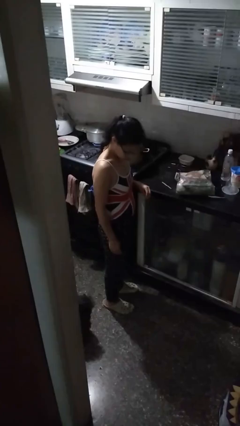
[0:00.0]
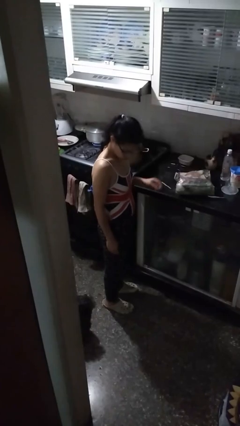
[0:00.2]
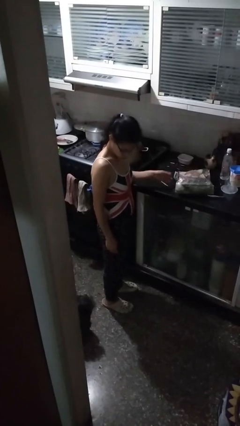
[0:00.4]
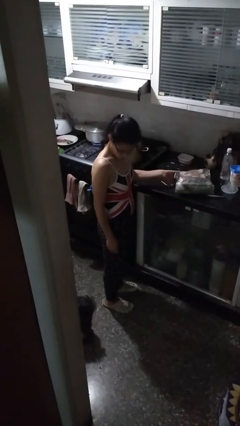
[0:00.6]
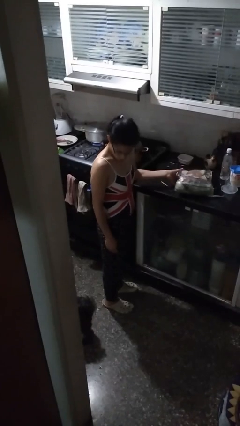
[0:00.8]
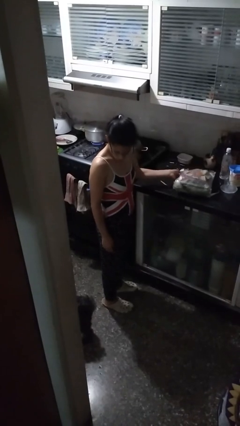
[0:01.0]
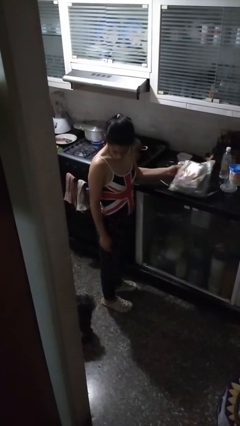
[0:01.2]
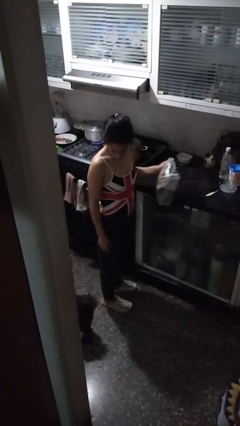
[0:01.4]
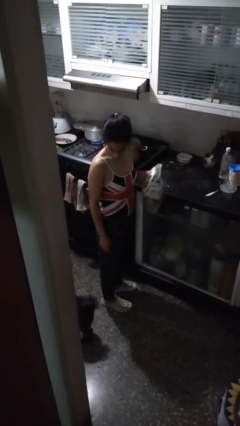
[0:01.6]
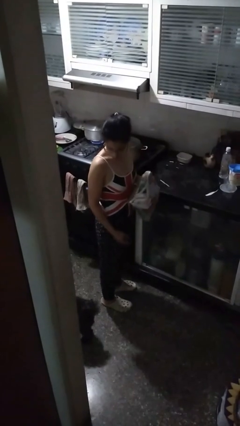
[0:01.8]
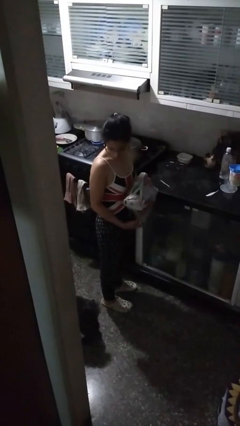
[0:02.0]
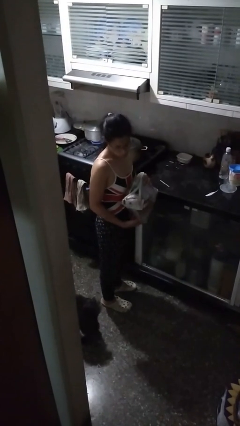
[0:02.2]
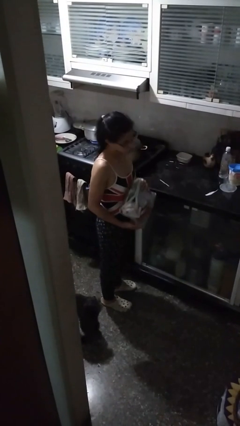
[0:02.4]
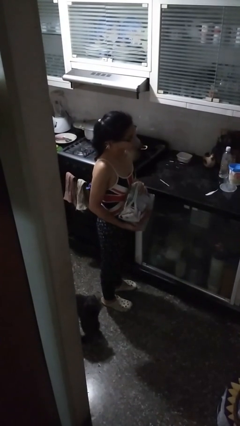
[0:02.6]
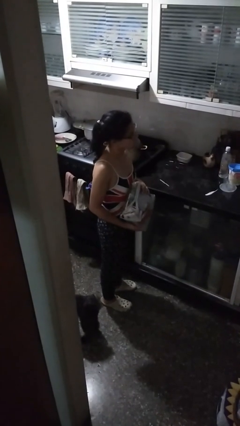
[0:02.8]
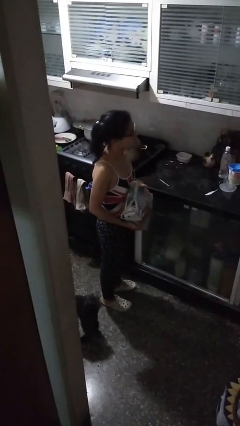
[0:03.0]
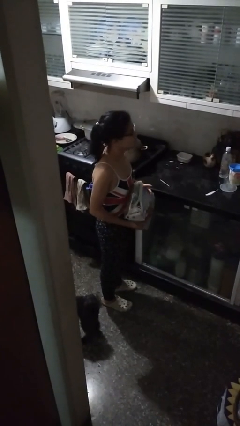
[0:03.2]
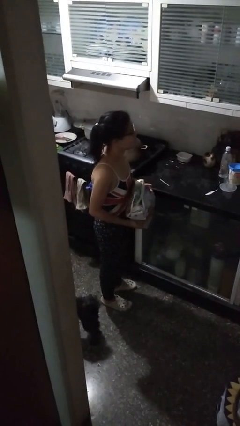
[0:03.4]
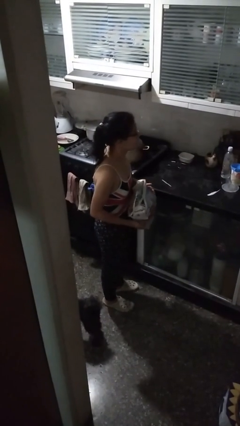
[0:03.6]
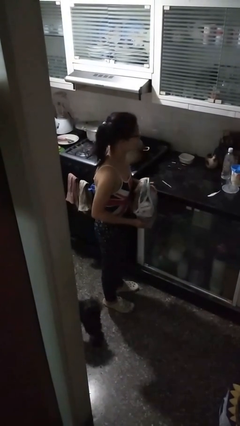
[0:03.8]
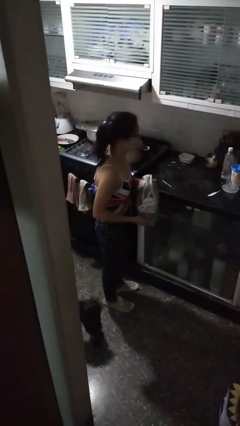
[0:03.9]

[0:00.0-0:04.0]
person picks up object from countertop

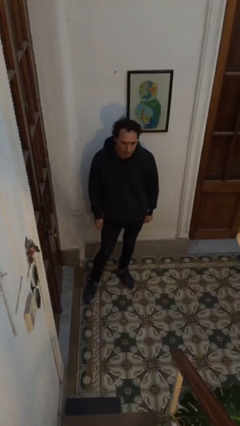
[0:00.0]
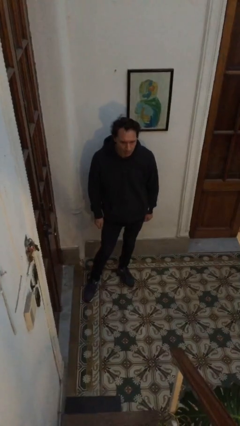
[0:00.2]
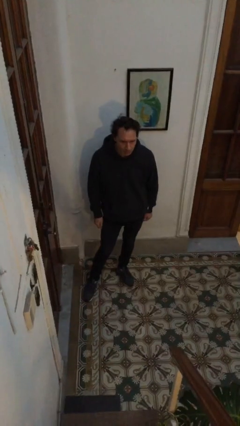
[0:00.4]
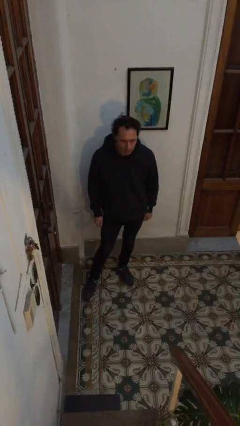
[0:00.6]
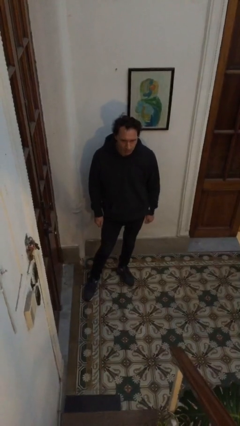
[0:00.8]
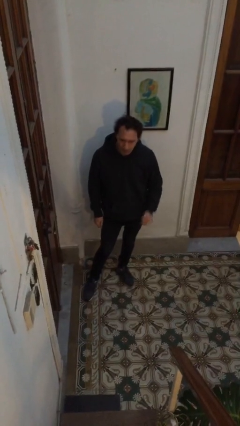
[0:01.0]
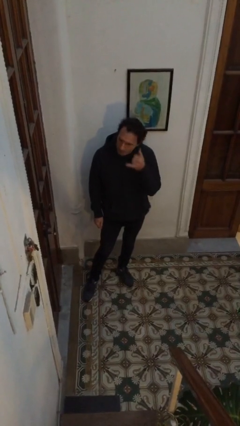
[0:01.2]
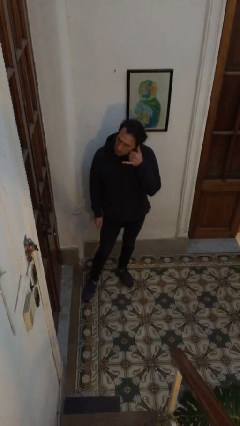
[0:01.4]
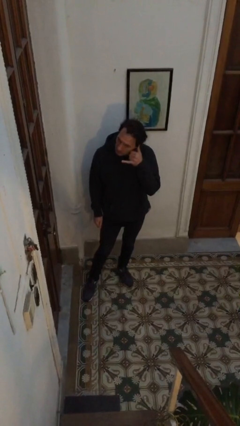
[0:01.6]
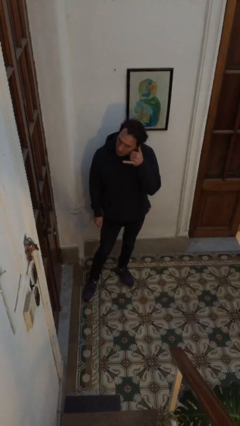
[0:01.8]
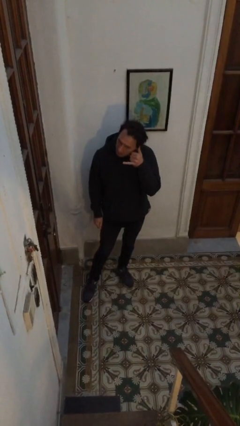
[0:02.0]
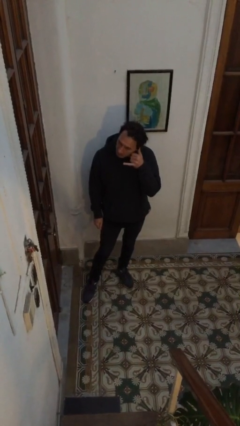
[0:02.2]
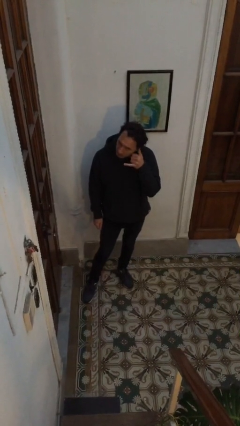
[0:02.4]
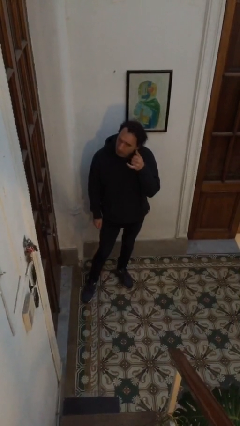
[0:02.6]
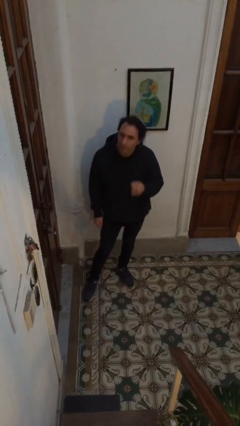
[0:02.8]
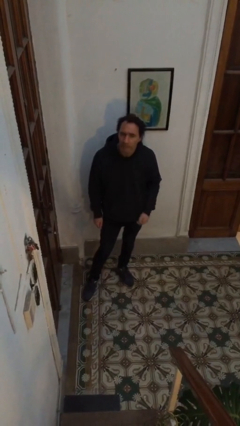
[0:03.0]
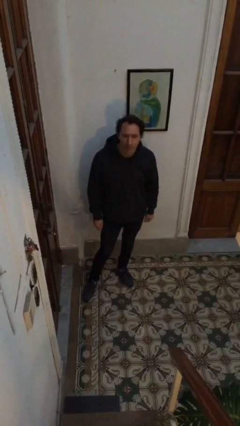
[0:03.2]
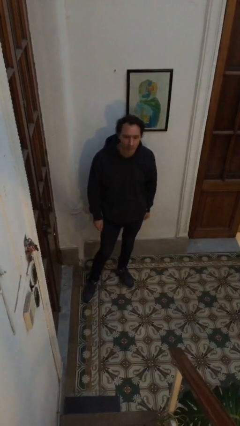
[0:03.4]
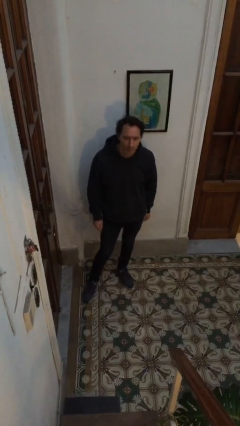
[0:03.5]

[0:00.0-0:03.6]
person gestures call me

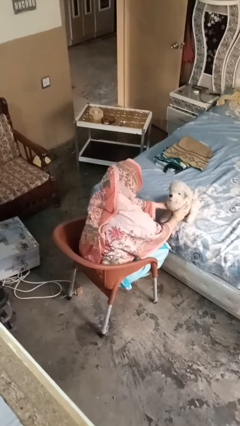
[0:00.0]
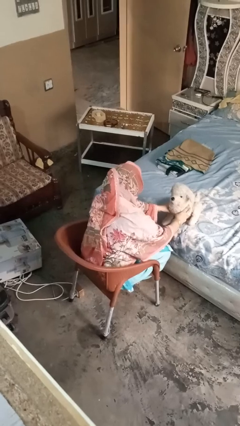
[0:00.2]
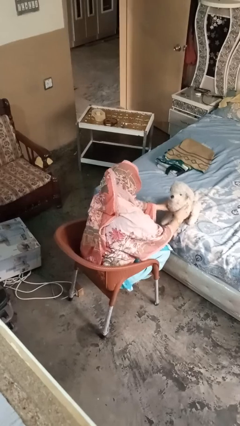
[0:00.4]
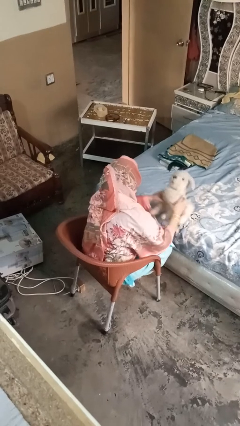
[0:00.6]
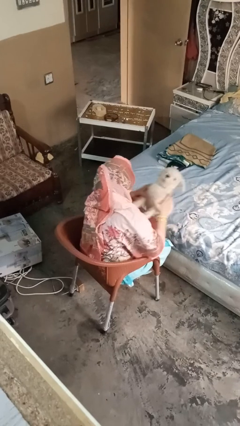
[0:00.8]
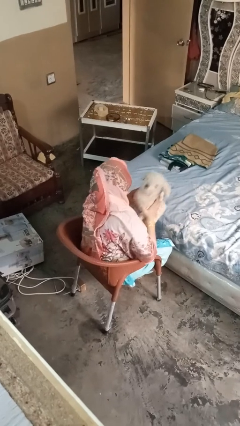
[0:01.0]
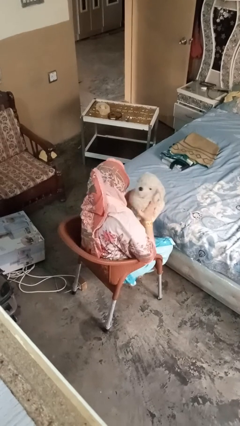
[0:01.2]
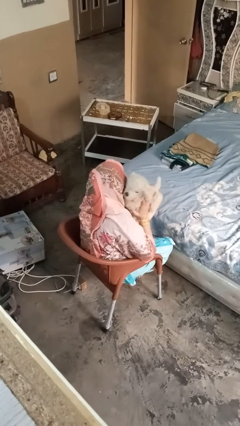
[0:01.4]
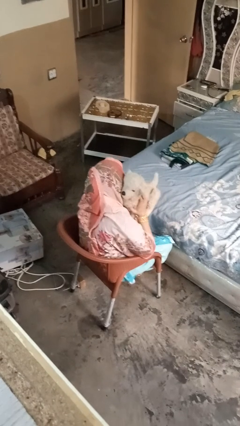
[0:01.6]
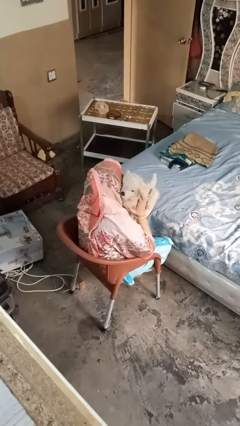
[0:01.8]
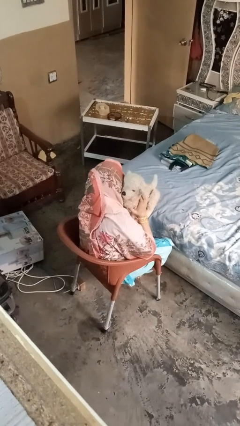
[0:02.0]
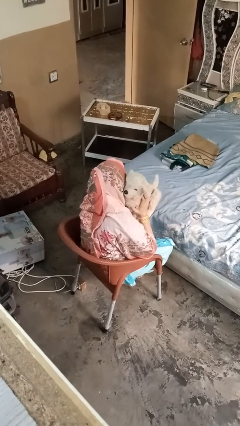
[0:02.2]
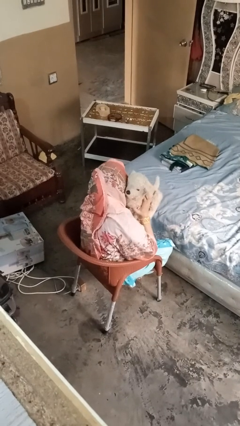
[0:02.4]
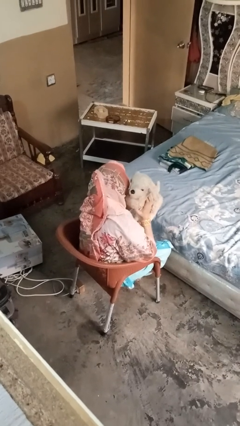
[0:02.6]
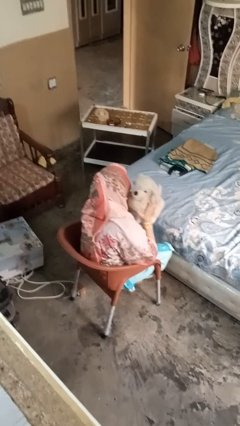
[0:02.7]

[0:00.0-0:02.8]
person hugs stuffed animal

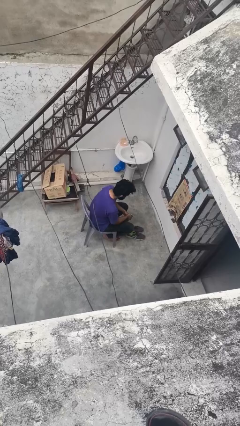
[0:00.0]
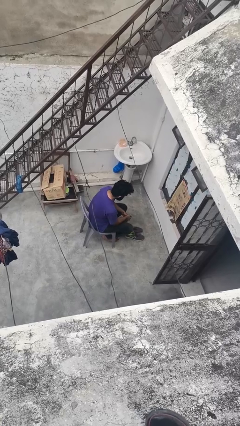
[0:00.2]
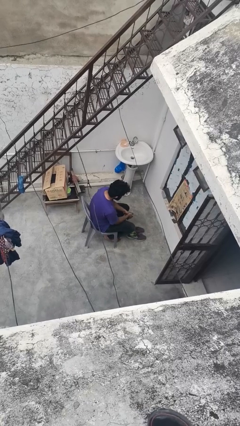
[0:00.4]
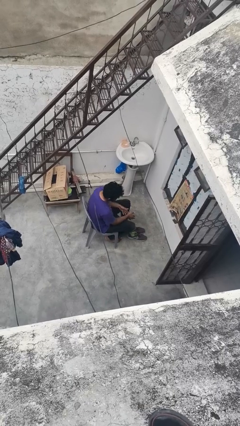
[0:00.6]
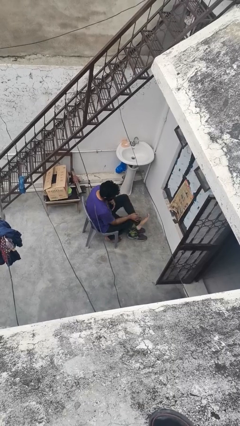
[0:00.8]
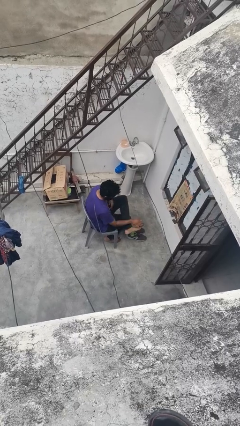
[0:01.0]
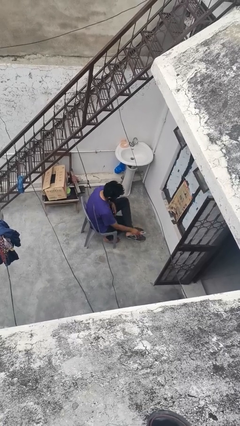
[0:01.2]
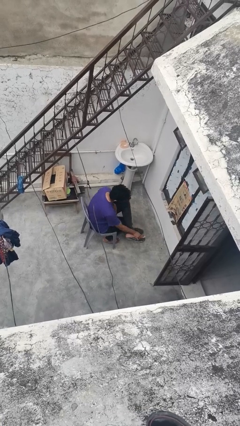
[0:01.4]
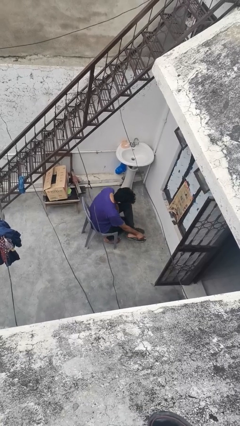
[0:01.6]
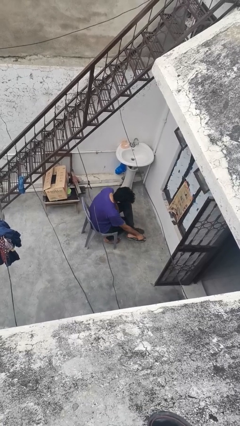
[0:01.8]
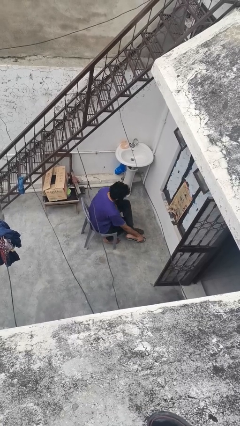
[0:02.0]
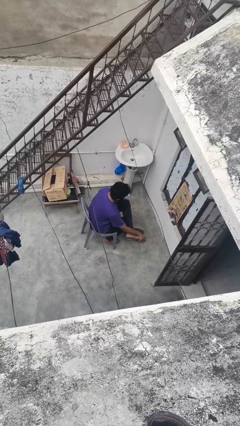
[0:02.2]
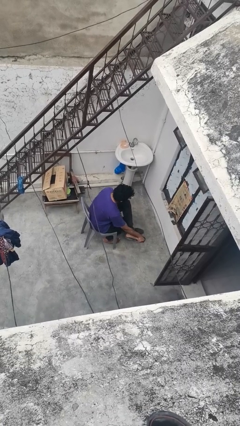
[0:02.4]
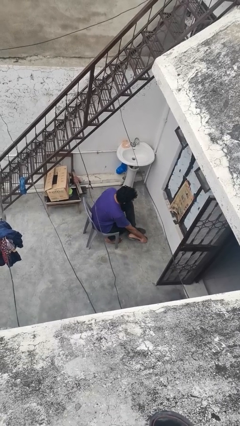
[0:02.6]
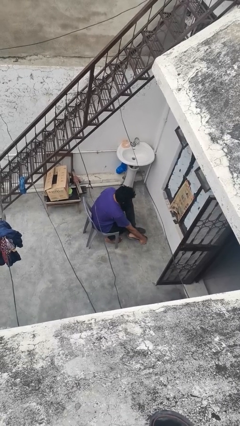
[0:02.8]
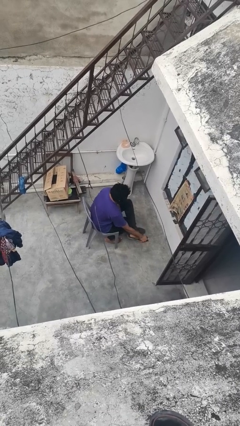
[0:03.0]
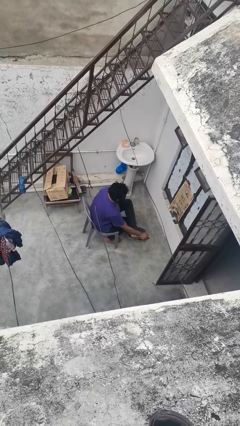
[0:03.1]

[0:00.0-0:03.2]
person rubs foot

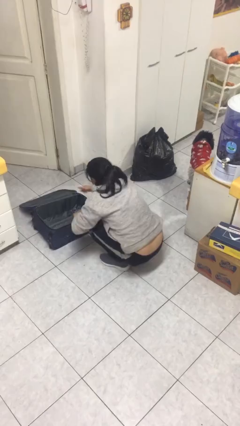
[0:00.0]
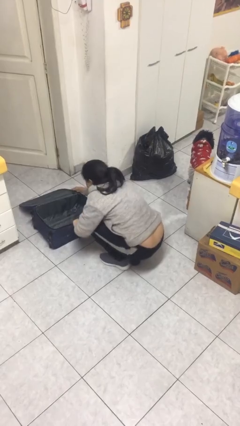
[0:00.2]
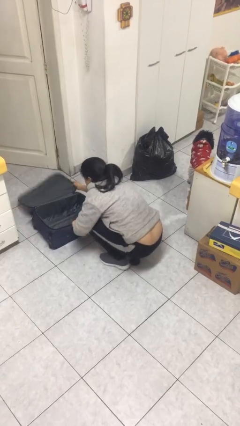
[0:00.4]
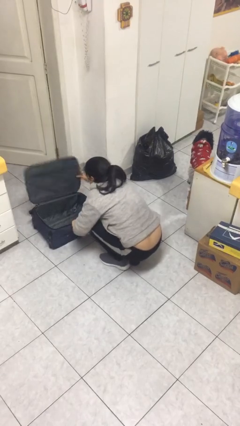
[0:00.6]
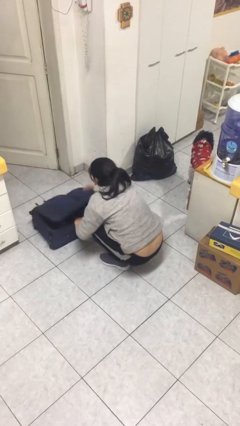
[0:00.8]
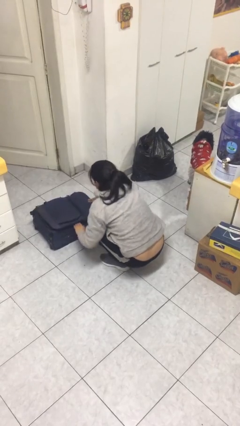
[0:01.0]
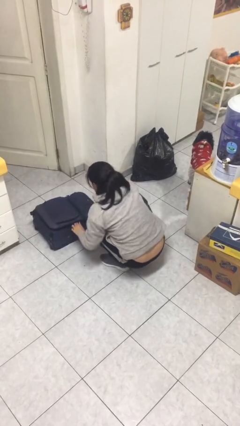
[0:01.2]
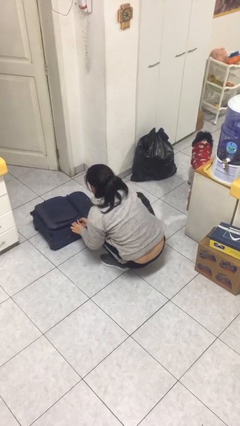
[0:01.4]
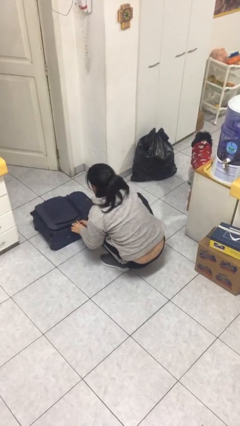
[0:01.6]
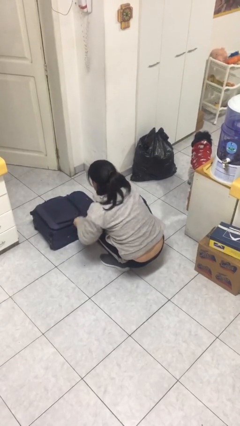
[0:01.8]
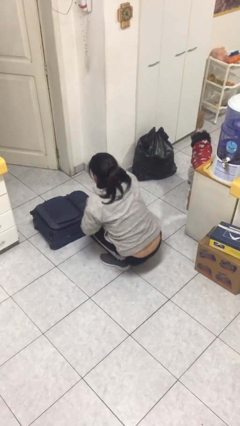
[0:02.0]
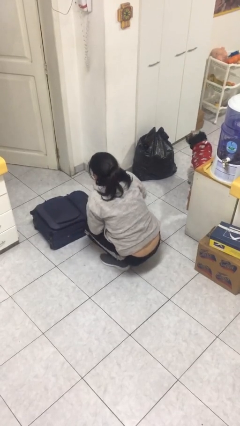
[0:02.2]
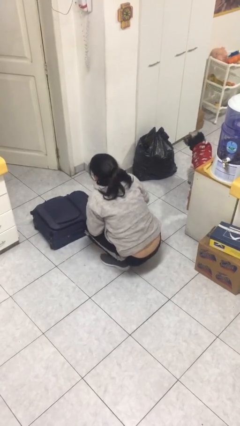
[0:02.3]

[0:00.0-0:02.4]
person closes suitcase

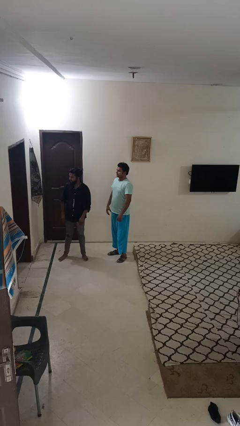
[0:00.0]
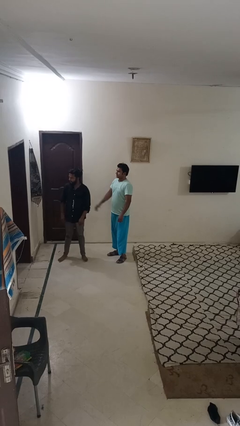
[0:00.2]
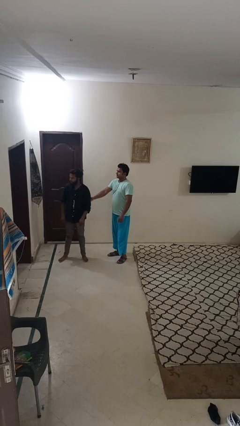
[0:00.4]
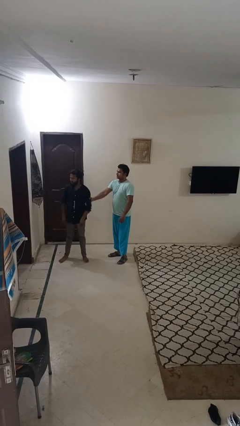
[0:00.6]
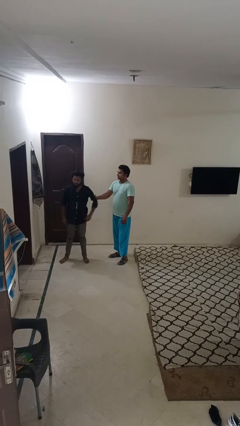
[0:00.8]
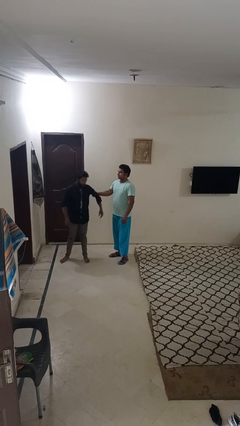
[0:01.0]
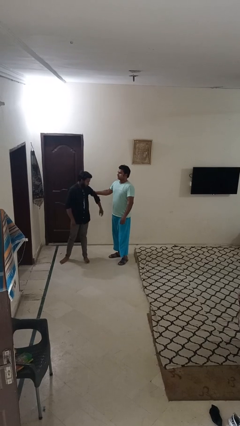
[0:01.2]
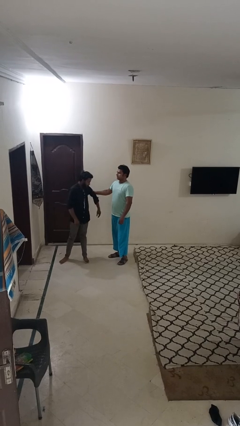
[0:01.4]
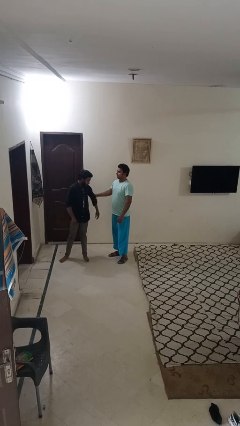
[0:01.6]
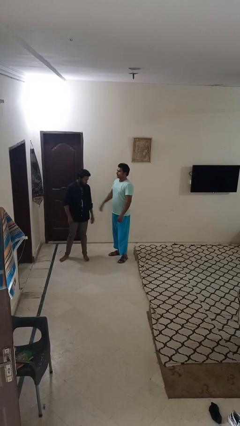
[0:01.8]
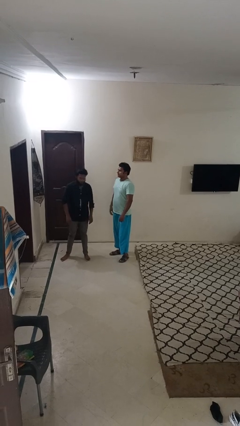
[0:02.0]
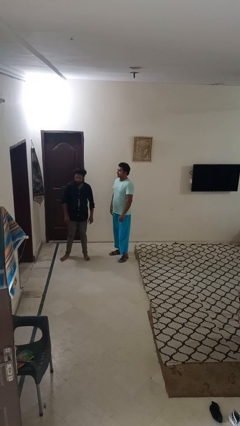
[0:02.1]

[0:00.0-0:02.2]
person grabs person by bicep
